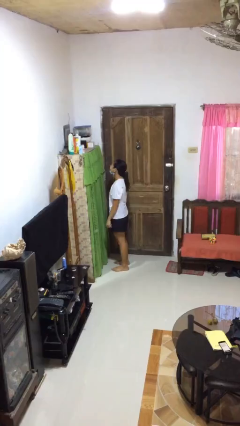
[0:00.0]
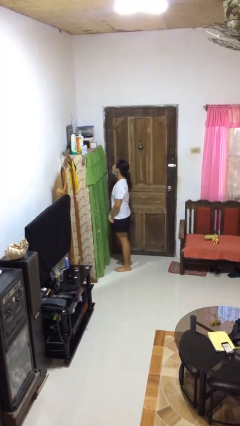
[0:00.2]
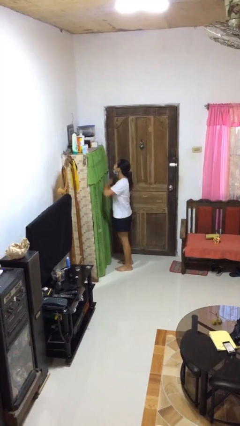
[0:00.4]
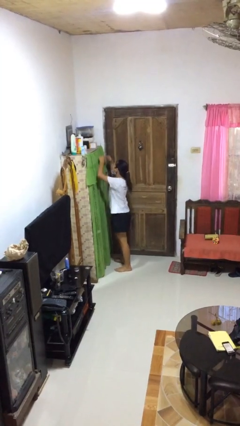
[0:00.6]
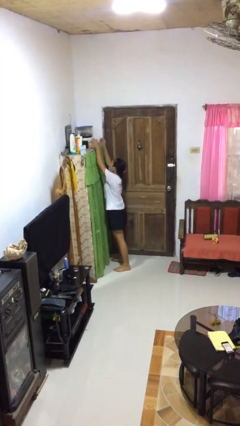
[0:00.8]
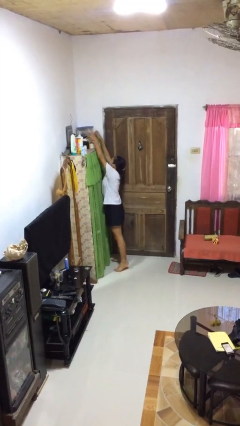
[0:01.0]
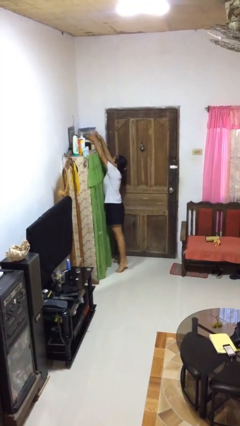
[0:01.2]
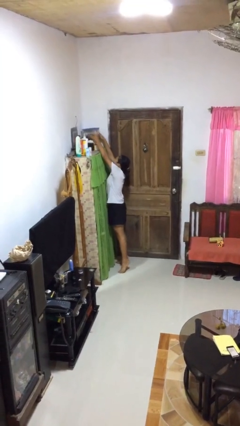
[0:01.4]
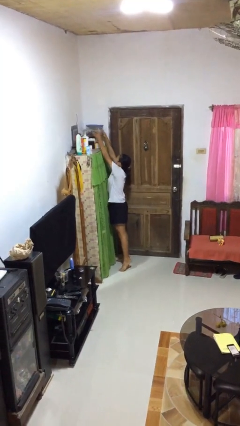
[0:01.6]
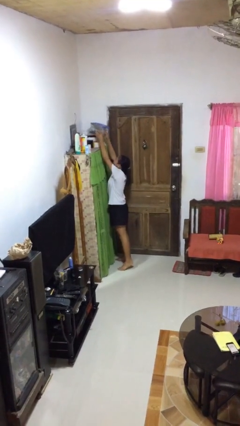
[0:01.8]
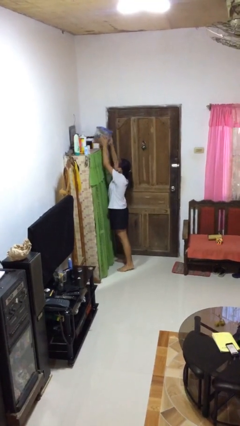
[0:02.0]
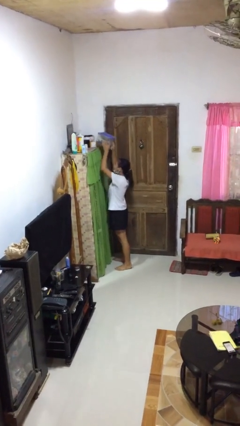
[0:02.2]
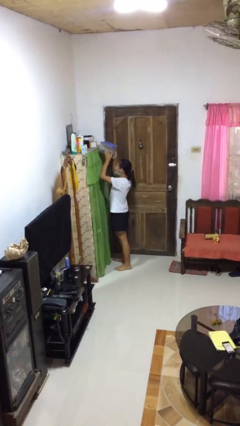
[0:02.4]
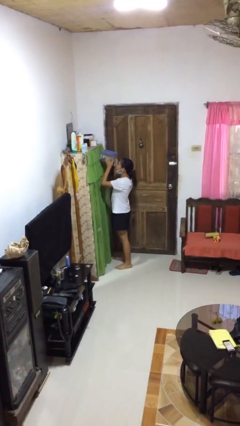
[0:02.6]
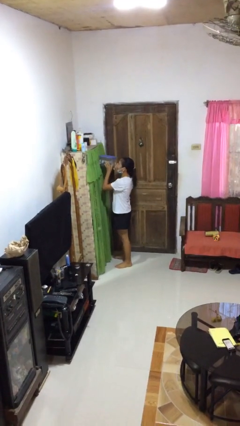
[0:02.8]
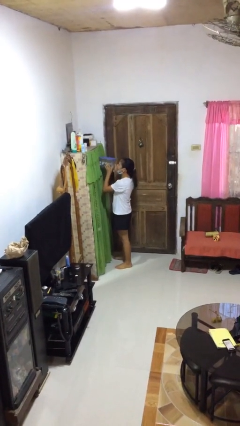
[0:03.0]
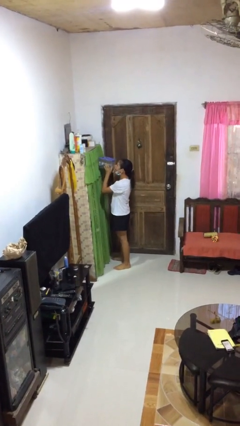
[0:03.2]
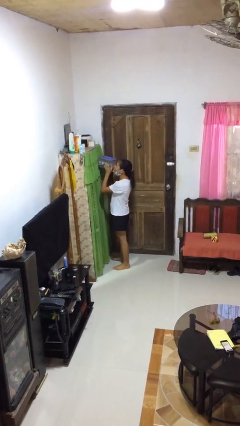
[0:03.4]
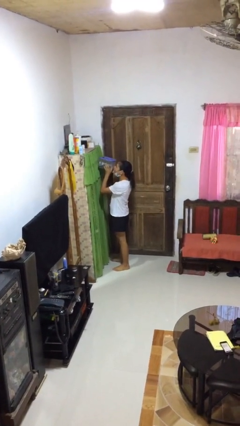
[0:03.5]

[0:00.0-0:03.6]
person picks up object from shelf

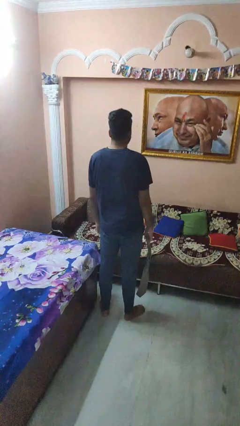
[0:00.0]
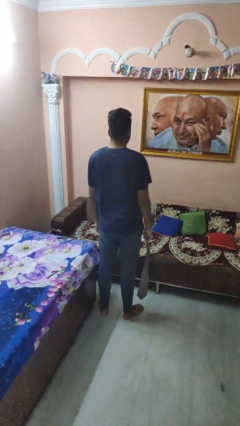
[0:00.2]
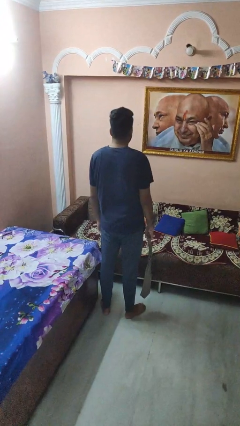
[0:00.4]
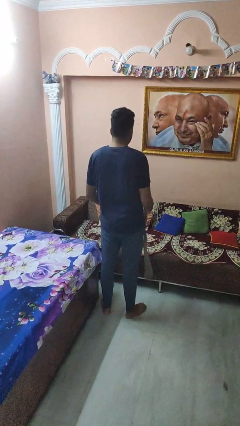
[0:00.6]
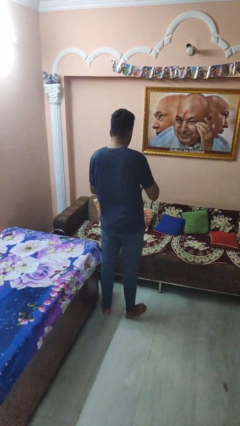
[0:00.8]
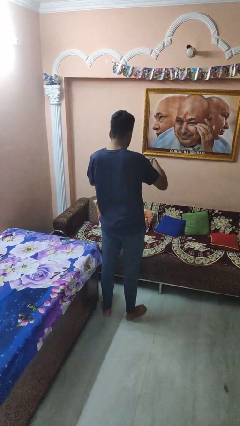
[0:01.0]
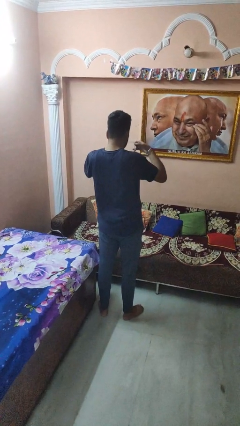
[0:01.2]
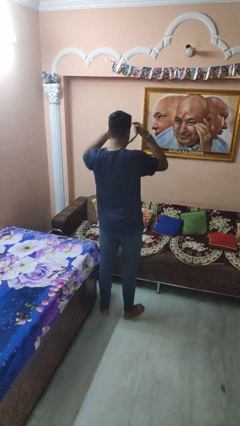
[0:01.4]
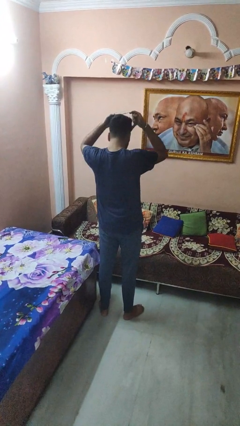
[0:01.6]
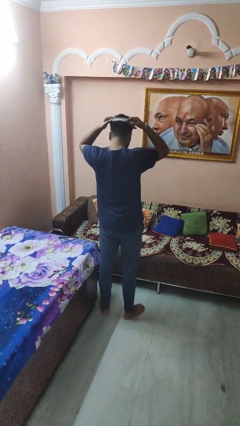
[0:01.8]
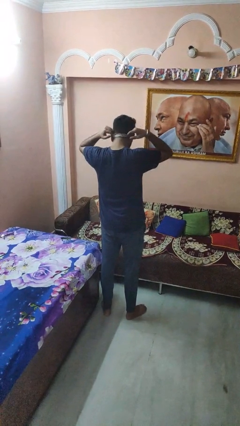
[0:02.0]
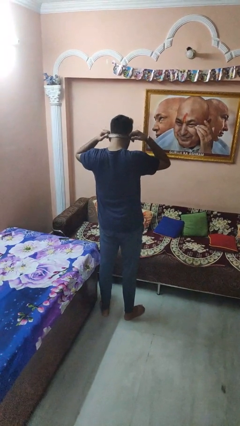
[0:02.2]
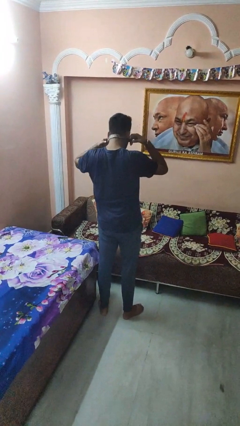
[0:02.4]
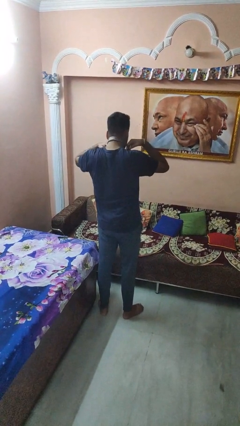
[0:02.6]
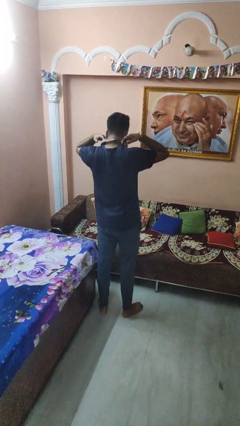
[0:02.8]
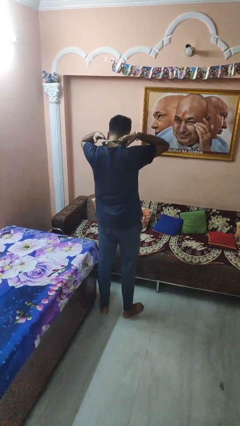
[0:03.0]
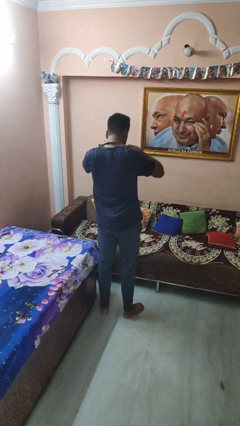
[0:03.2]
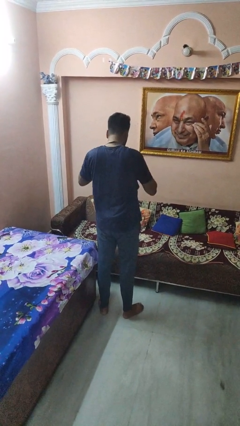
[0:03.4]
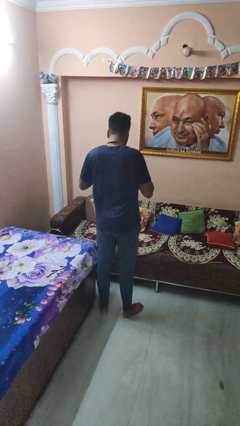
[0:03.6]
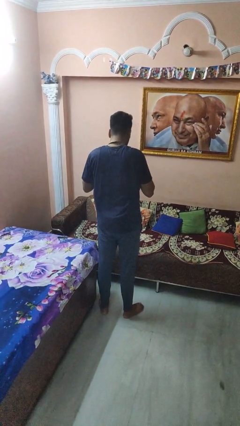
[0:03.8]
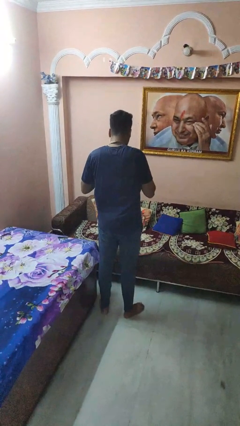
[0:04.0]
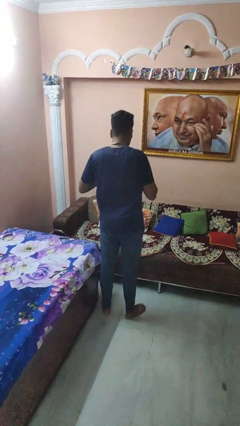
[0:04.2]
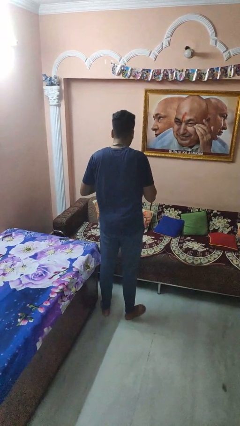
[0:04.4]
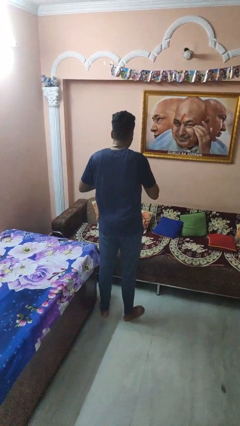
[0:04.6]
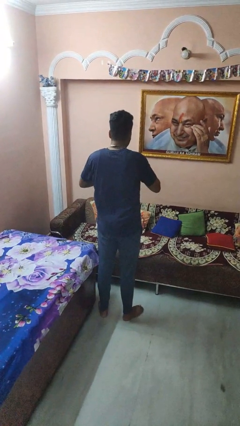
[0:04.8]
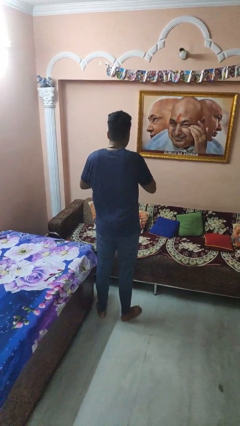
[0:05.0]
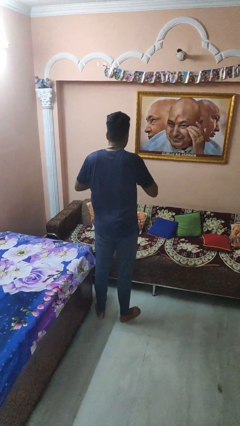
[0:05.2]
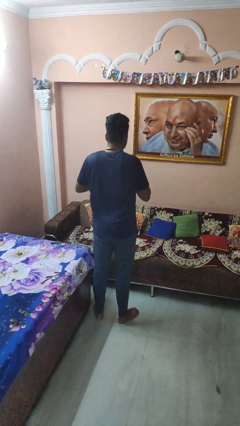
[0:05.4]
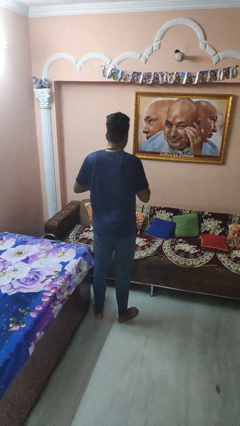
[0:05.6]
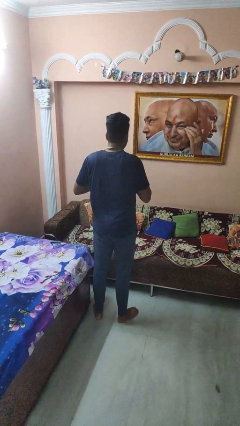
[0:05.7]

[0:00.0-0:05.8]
person puts on necktie

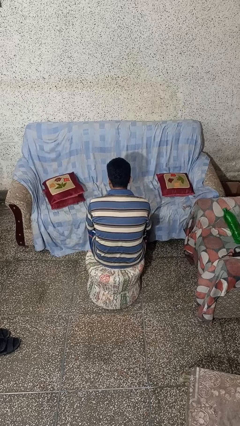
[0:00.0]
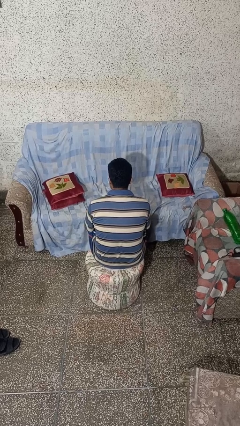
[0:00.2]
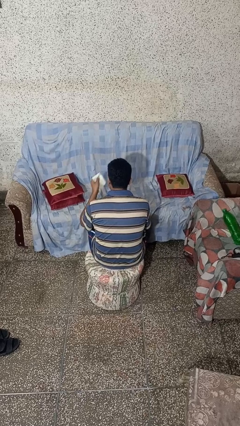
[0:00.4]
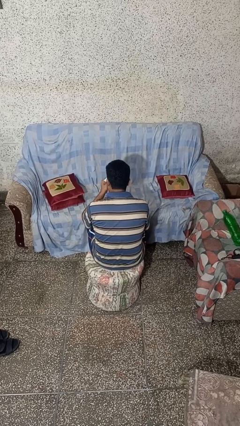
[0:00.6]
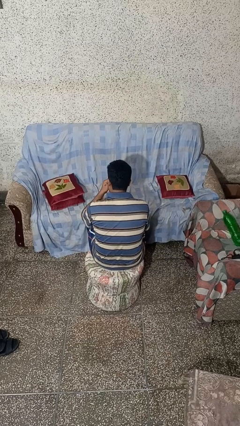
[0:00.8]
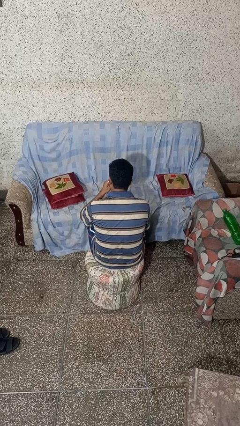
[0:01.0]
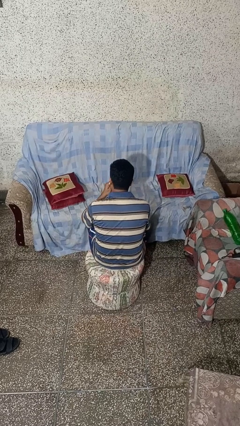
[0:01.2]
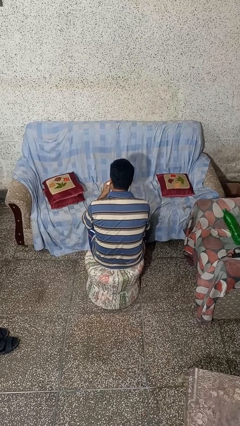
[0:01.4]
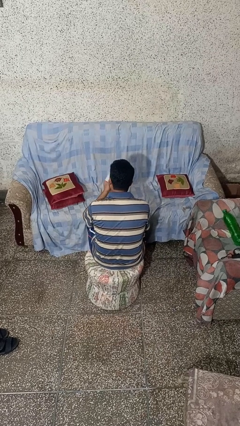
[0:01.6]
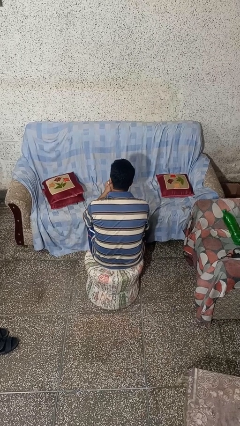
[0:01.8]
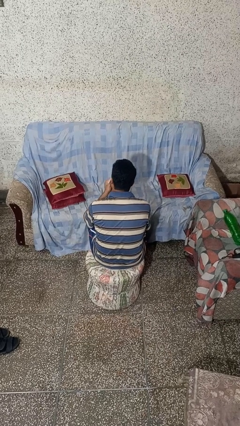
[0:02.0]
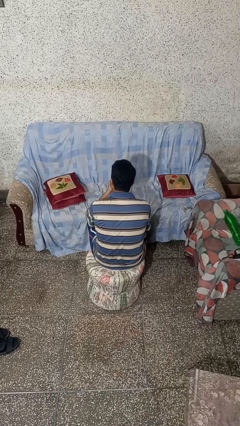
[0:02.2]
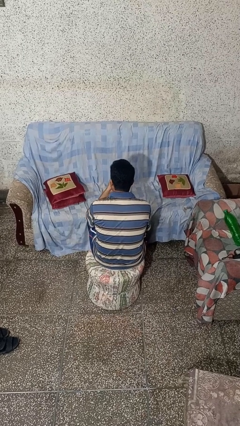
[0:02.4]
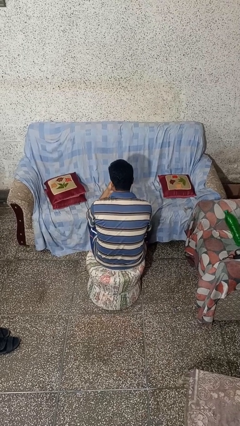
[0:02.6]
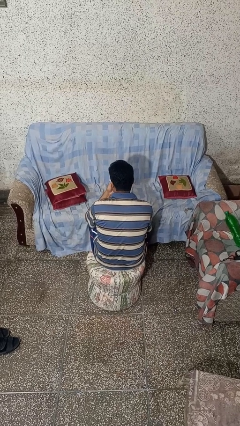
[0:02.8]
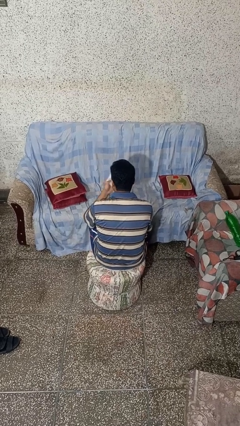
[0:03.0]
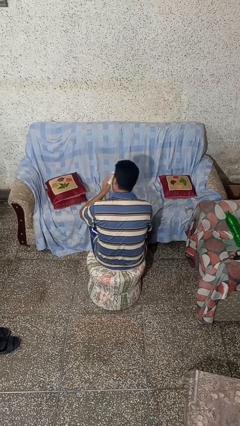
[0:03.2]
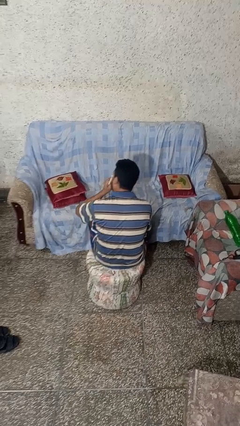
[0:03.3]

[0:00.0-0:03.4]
person blows nose

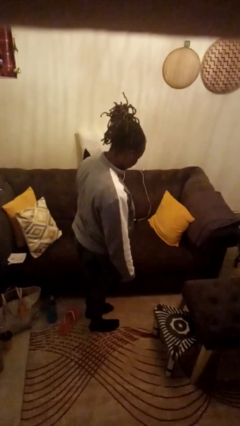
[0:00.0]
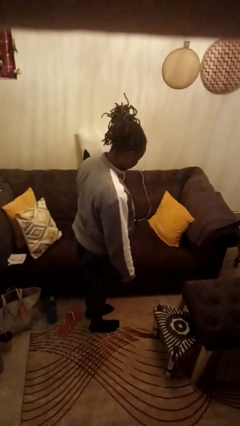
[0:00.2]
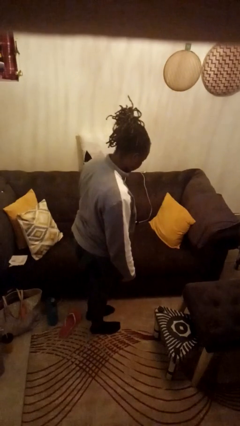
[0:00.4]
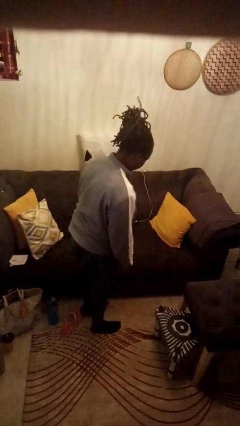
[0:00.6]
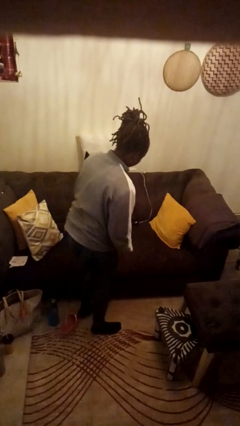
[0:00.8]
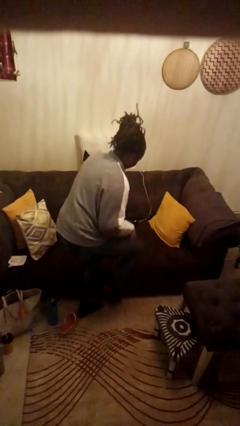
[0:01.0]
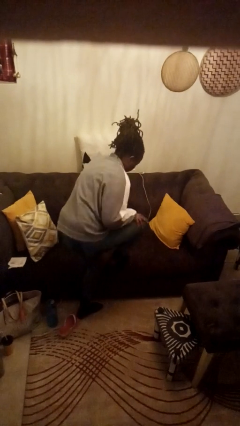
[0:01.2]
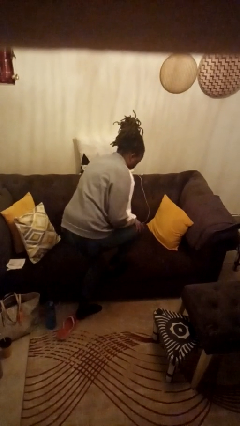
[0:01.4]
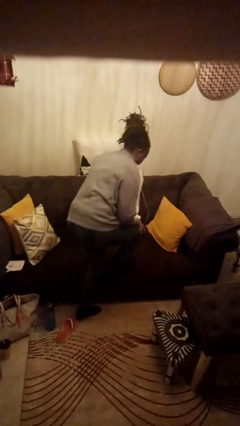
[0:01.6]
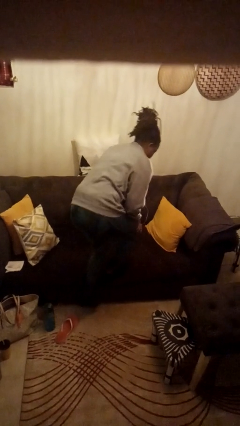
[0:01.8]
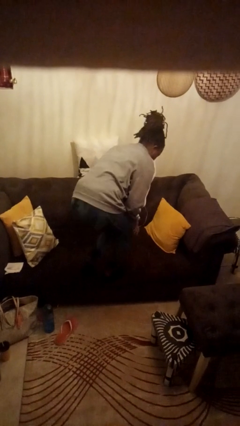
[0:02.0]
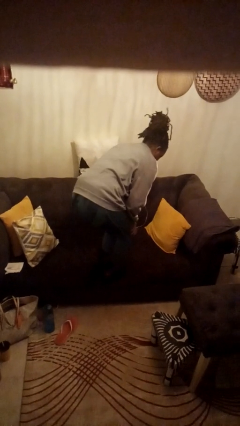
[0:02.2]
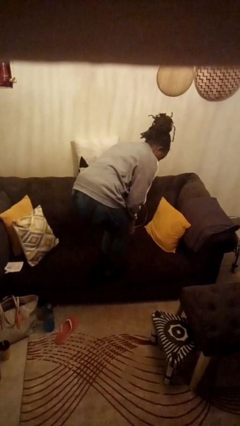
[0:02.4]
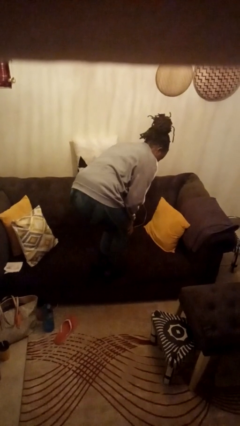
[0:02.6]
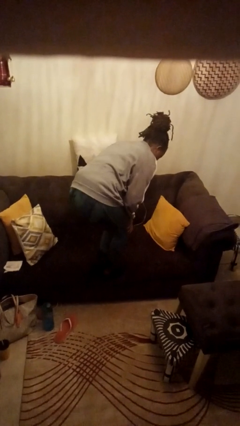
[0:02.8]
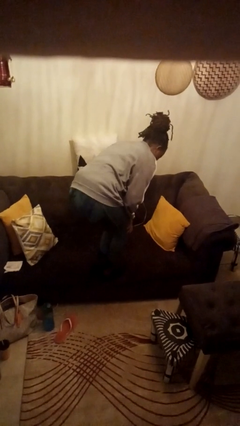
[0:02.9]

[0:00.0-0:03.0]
person climbs on chair

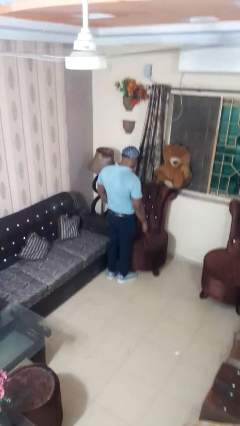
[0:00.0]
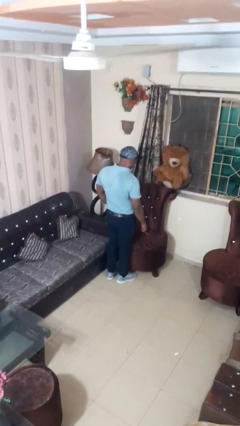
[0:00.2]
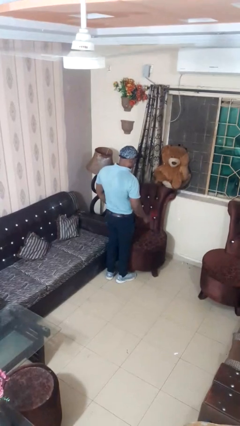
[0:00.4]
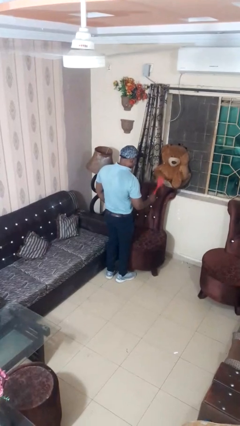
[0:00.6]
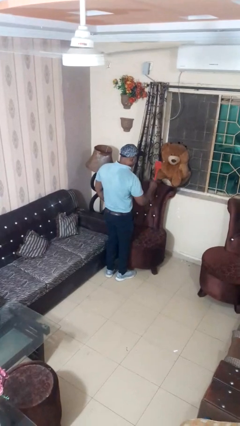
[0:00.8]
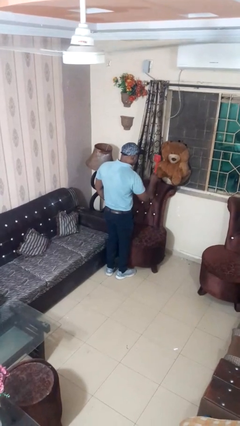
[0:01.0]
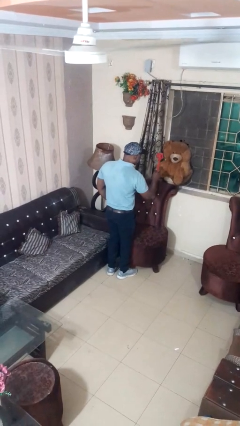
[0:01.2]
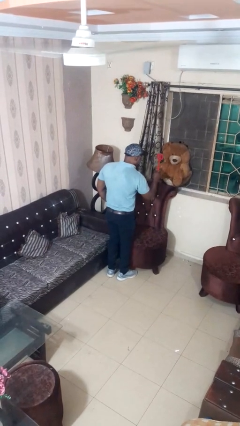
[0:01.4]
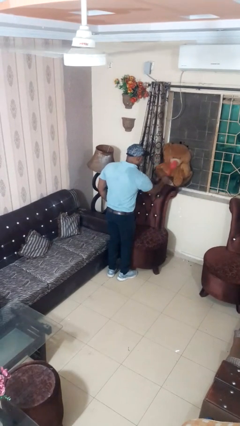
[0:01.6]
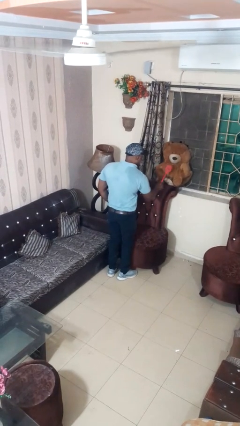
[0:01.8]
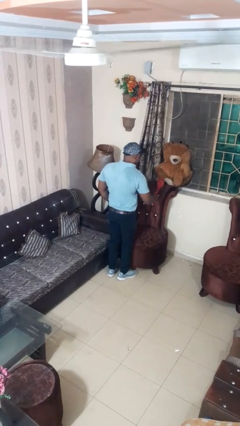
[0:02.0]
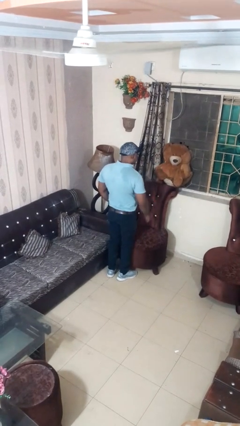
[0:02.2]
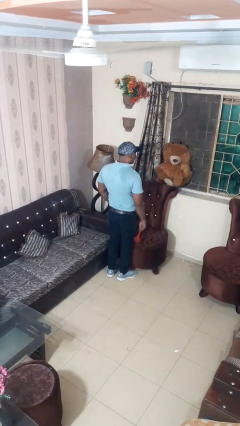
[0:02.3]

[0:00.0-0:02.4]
person swats bug
